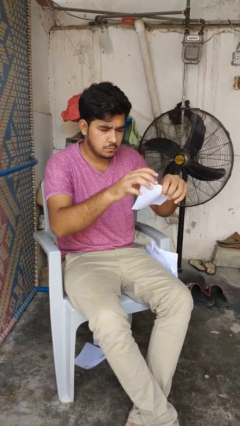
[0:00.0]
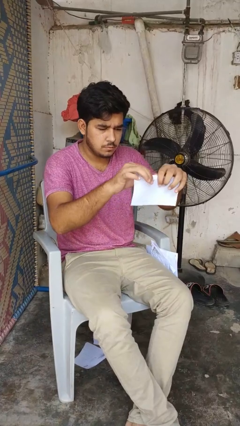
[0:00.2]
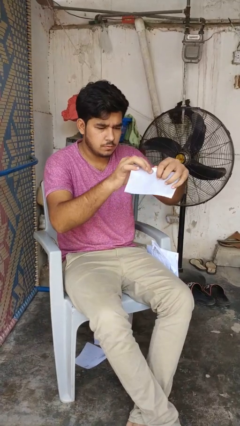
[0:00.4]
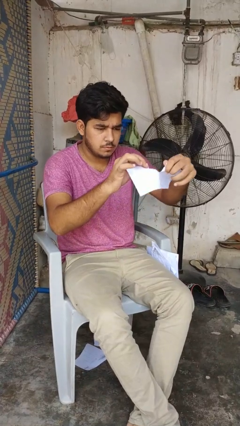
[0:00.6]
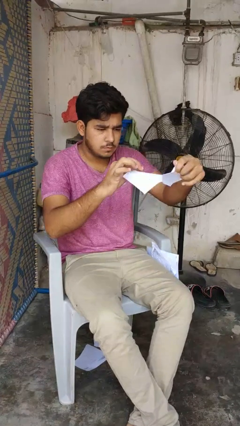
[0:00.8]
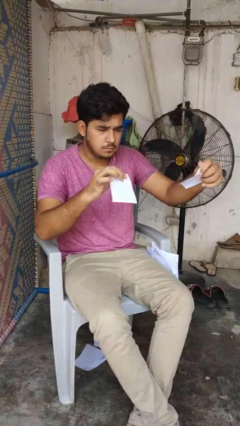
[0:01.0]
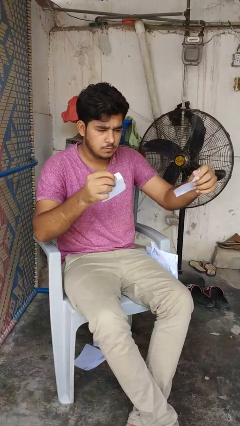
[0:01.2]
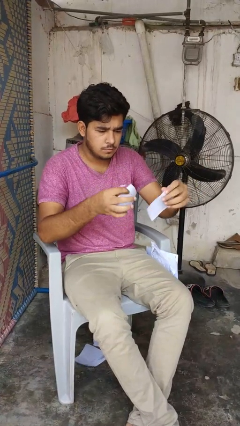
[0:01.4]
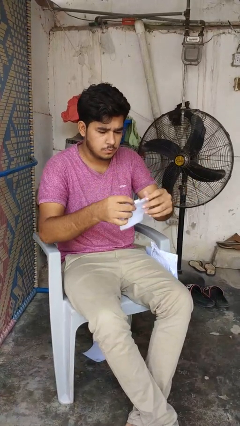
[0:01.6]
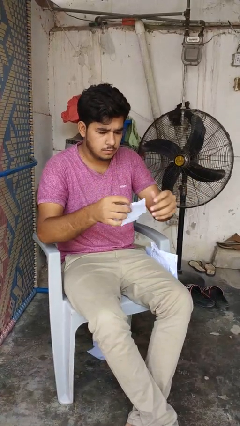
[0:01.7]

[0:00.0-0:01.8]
person tears paper

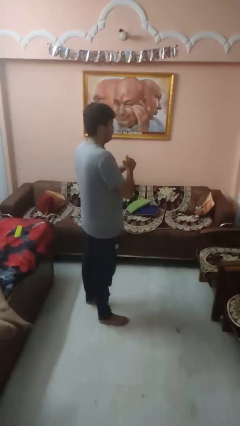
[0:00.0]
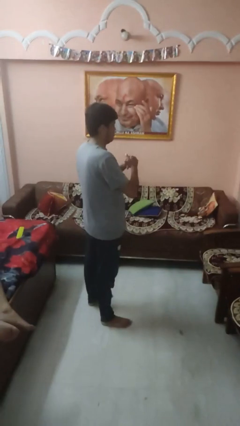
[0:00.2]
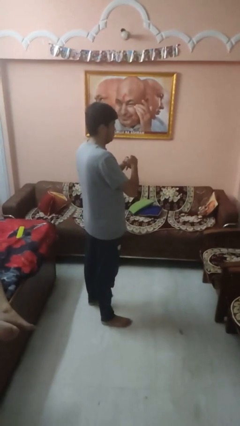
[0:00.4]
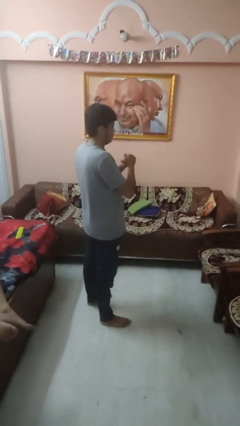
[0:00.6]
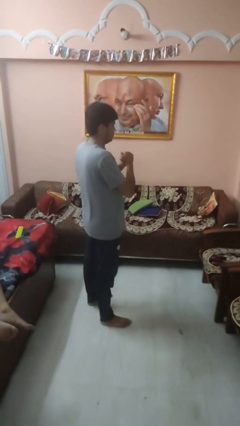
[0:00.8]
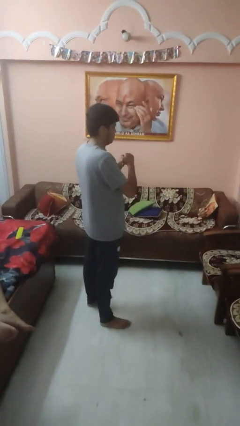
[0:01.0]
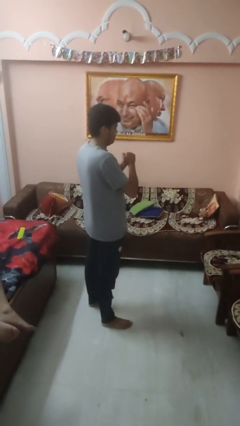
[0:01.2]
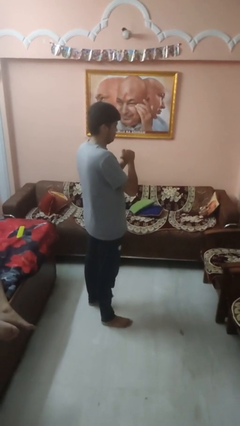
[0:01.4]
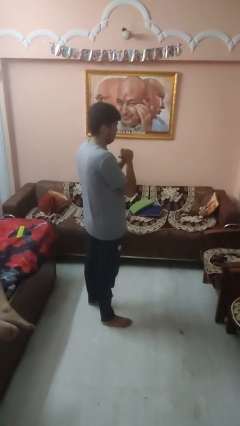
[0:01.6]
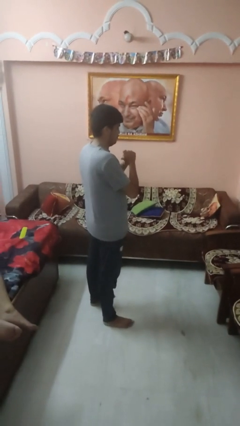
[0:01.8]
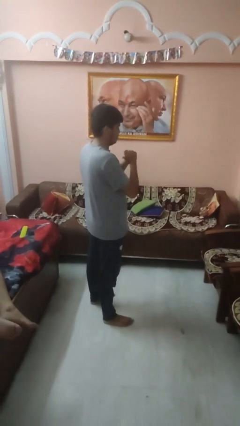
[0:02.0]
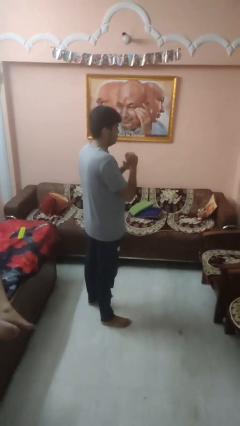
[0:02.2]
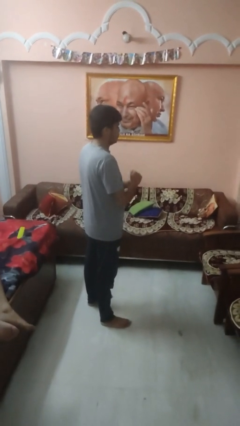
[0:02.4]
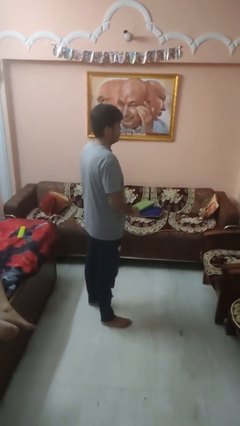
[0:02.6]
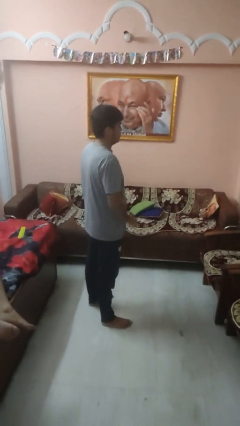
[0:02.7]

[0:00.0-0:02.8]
person cracks knuckles

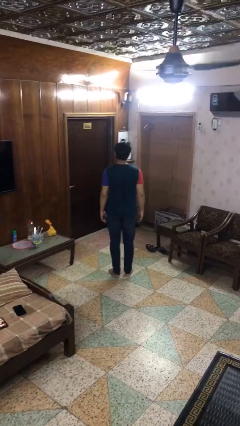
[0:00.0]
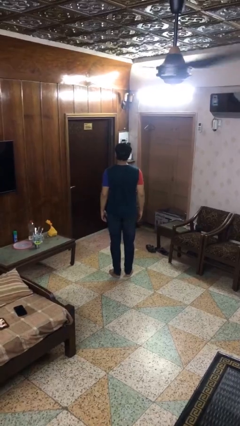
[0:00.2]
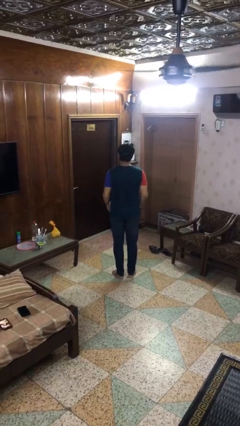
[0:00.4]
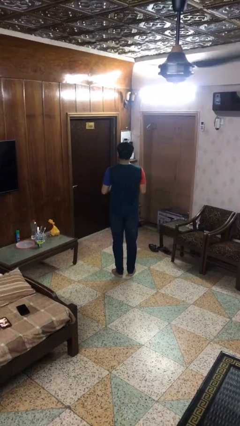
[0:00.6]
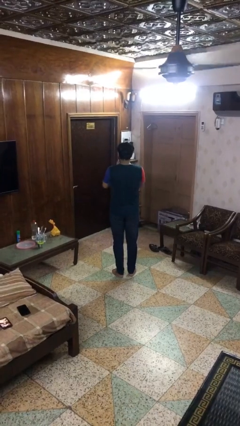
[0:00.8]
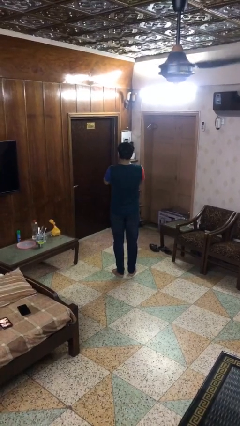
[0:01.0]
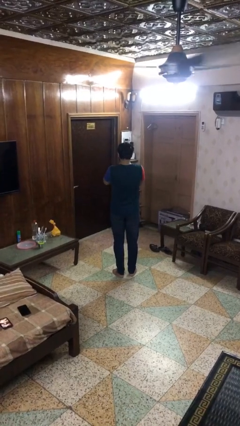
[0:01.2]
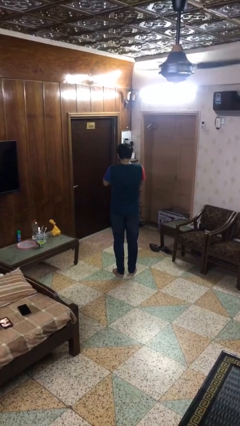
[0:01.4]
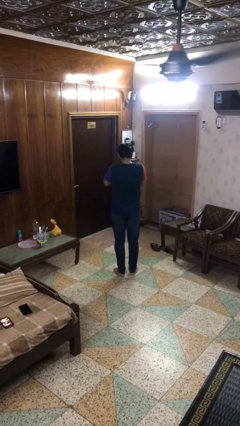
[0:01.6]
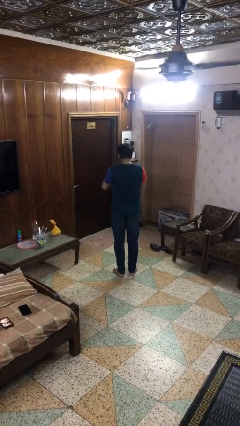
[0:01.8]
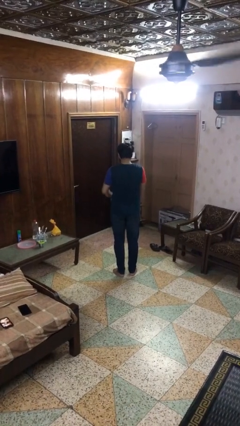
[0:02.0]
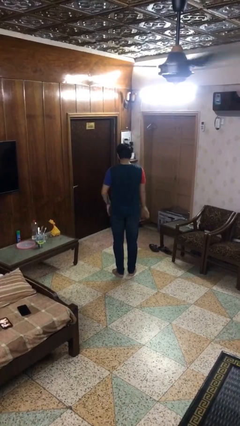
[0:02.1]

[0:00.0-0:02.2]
person sneezes into hand

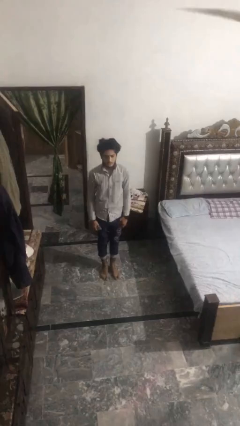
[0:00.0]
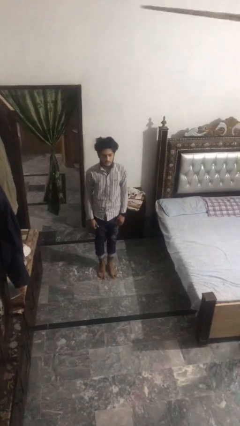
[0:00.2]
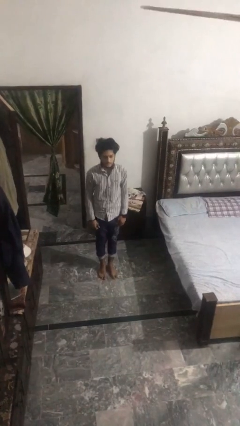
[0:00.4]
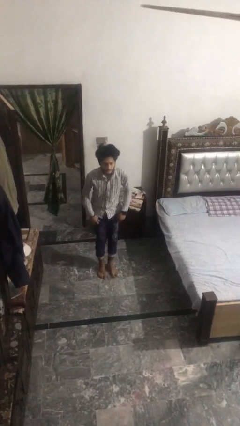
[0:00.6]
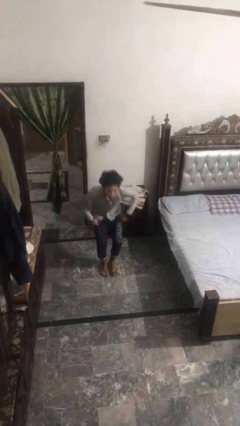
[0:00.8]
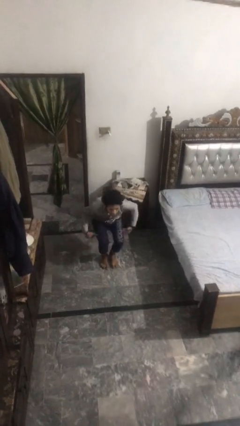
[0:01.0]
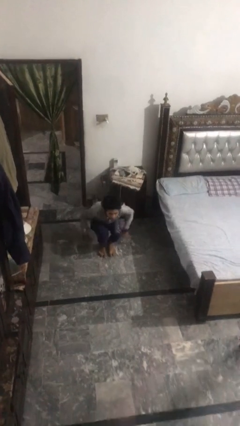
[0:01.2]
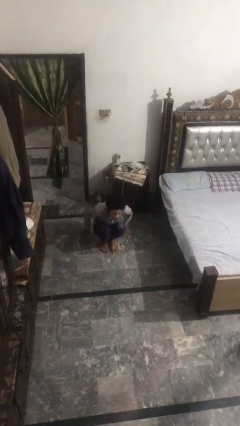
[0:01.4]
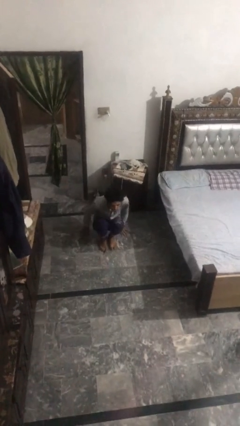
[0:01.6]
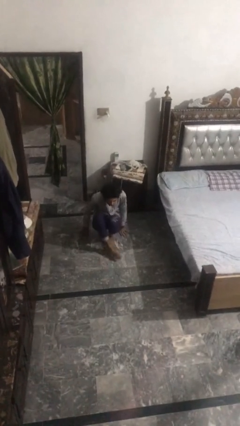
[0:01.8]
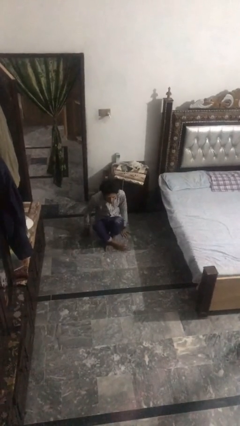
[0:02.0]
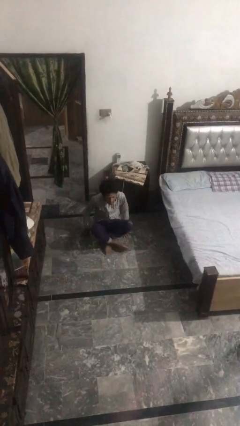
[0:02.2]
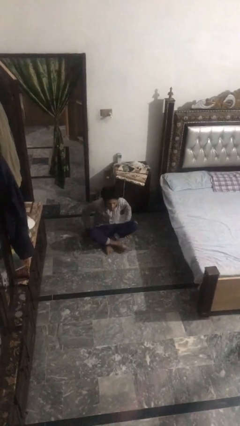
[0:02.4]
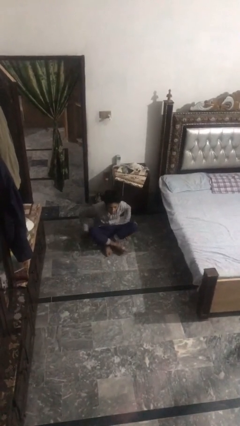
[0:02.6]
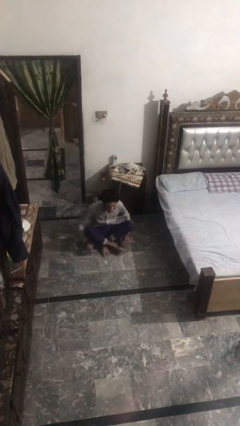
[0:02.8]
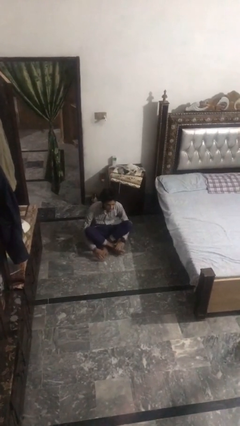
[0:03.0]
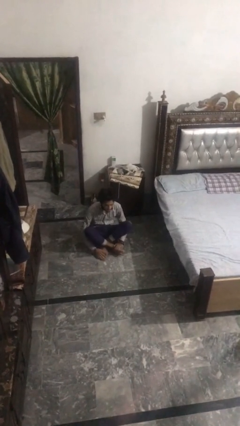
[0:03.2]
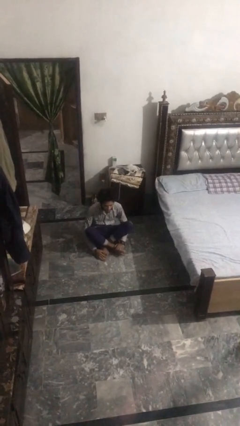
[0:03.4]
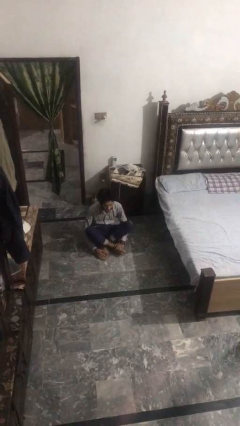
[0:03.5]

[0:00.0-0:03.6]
person sits crisscross

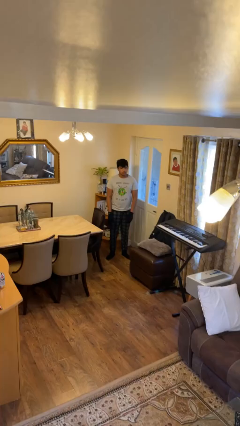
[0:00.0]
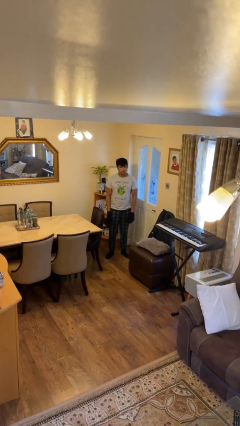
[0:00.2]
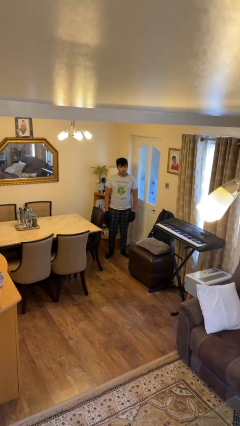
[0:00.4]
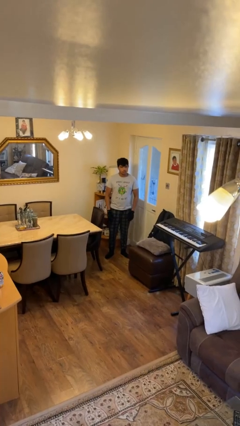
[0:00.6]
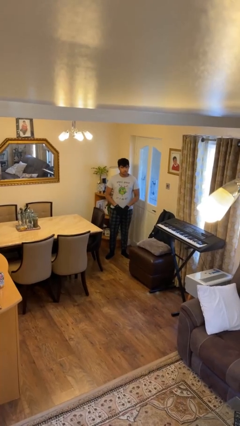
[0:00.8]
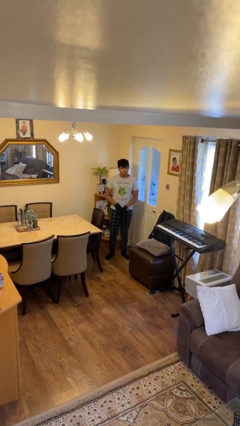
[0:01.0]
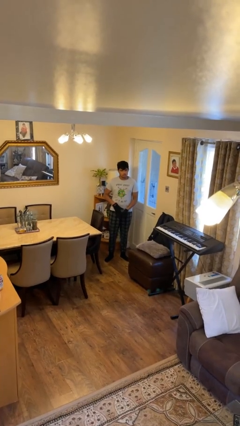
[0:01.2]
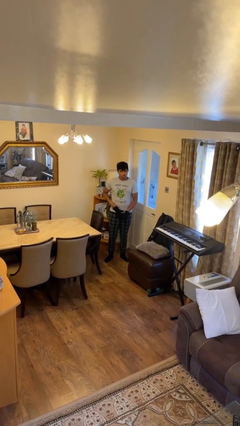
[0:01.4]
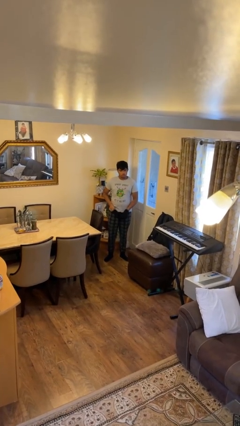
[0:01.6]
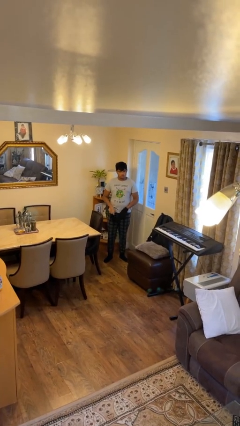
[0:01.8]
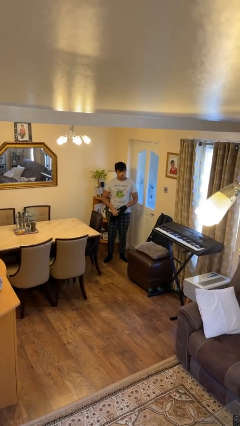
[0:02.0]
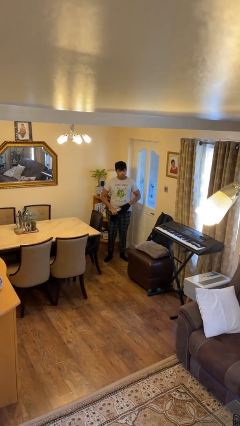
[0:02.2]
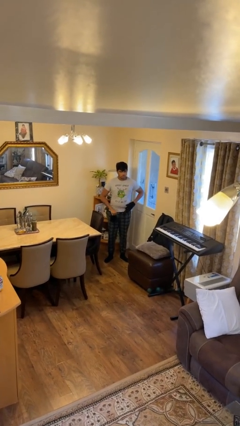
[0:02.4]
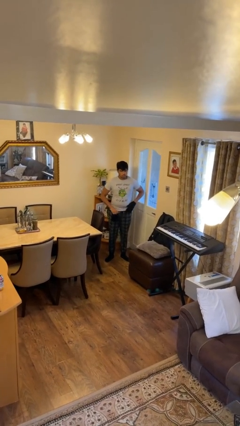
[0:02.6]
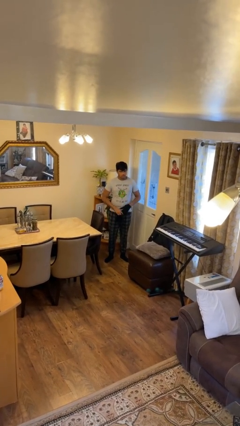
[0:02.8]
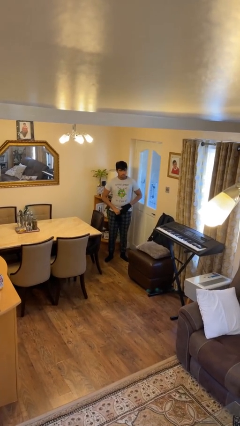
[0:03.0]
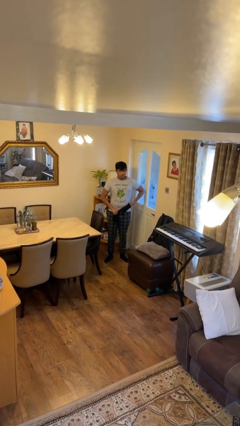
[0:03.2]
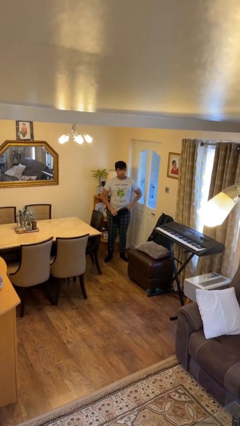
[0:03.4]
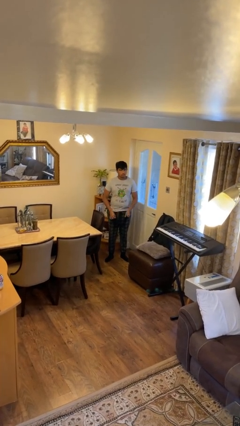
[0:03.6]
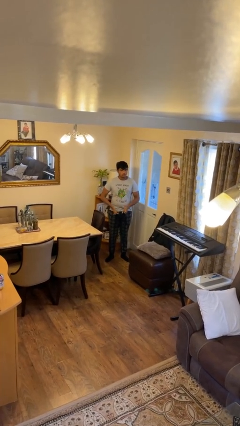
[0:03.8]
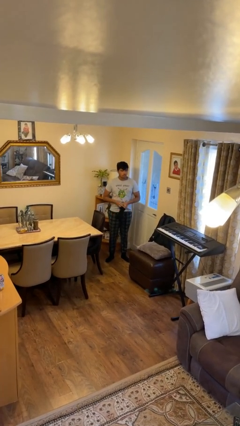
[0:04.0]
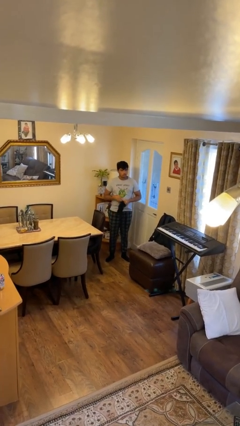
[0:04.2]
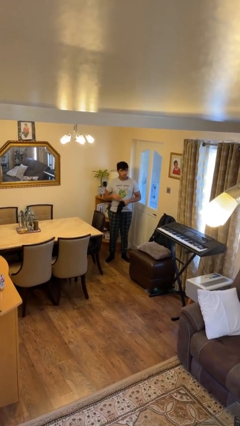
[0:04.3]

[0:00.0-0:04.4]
person takes off gloves

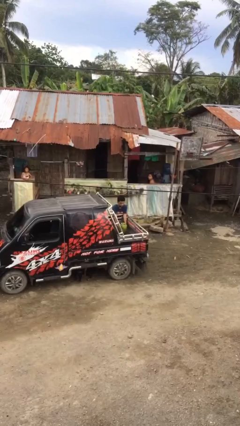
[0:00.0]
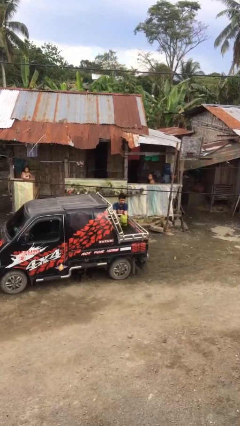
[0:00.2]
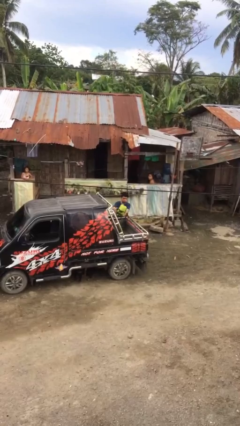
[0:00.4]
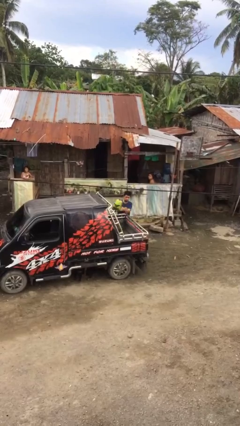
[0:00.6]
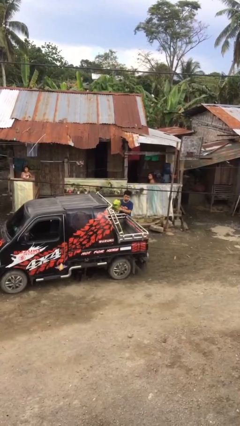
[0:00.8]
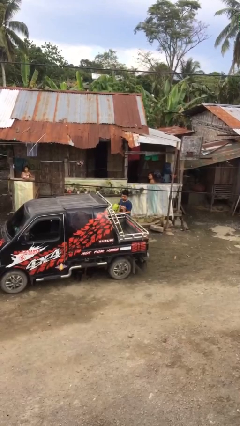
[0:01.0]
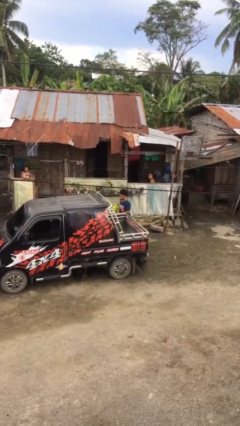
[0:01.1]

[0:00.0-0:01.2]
person unloads car

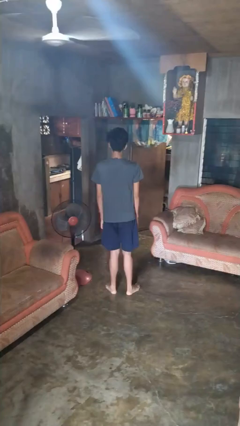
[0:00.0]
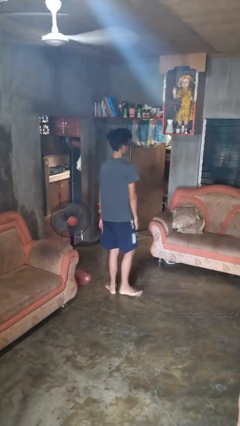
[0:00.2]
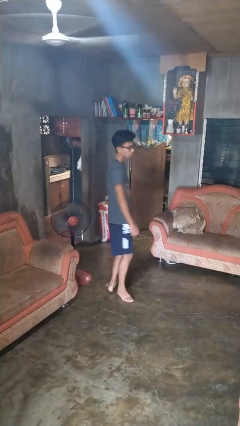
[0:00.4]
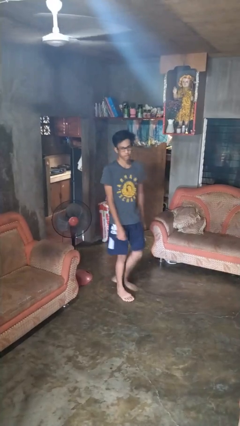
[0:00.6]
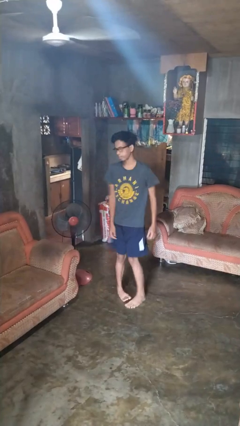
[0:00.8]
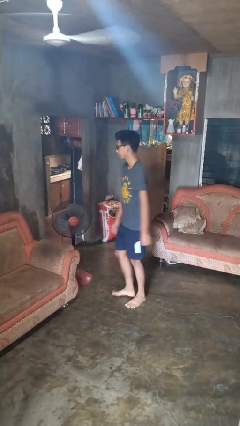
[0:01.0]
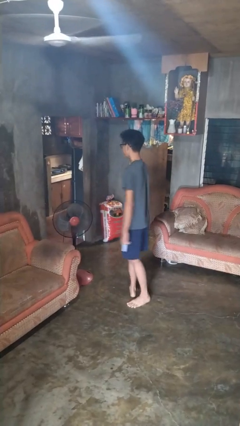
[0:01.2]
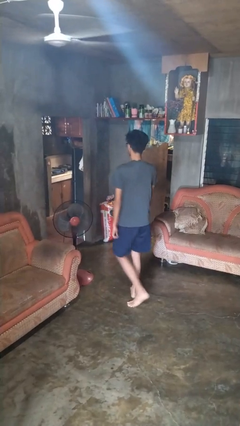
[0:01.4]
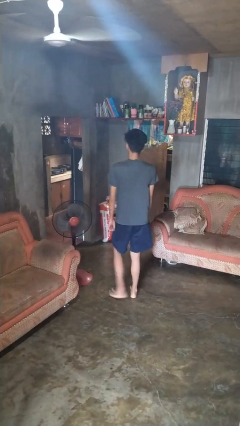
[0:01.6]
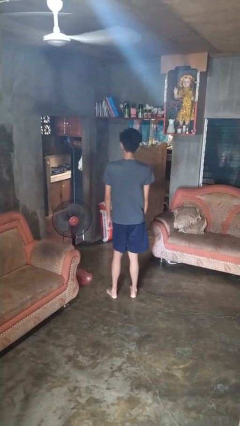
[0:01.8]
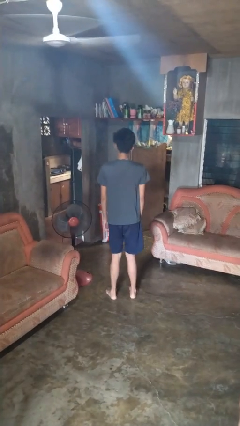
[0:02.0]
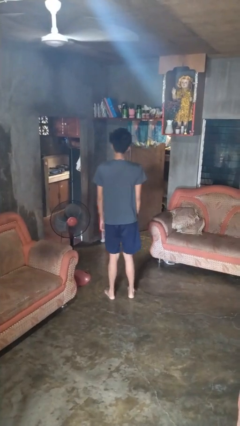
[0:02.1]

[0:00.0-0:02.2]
person twirls
